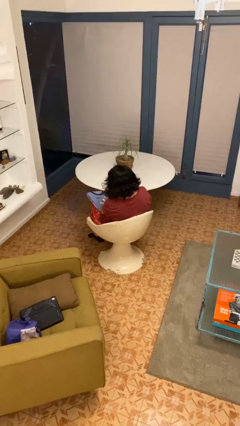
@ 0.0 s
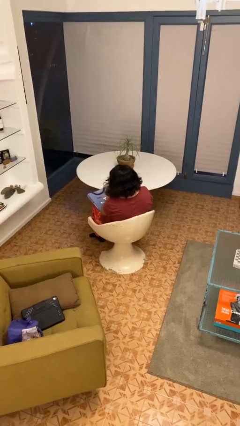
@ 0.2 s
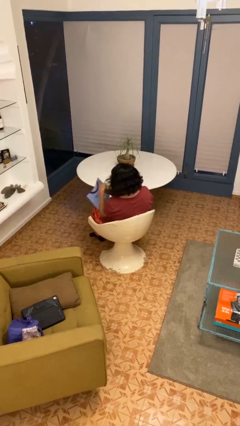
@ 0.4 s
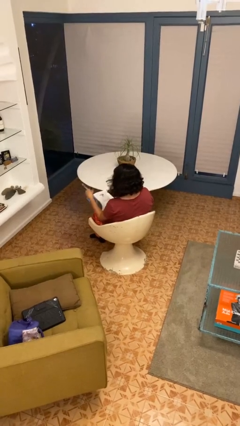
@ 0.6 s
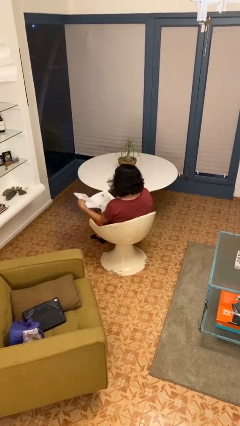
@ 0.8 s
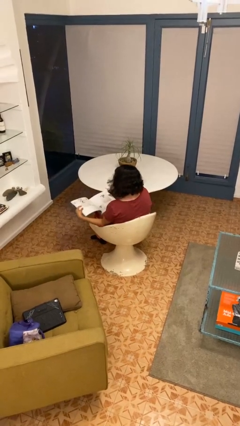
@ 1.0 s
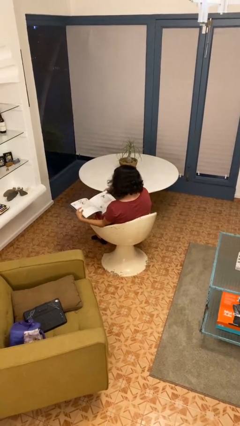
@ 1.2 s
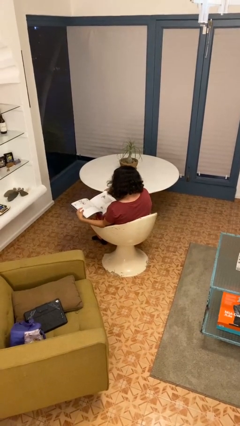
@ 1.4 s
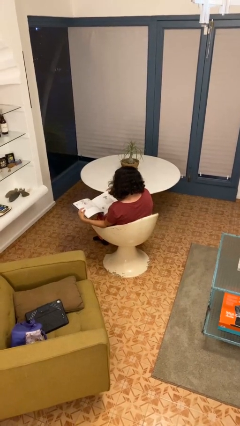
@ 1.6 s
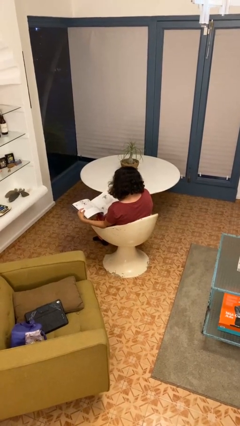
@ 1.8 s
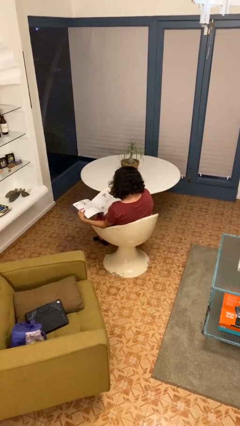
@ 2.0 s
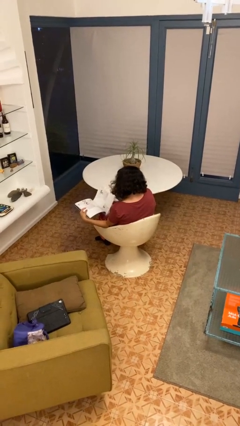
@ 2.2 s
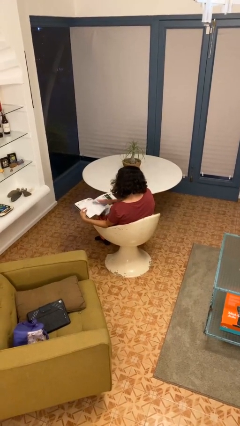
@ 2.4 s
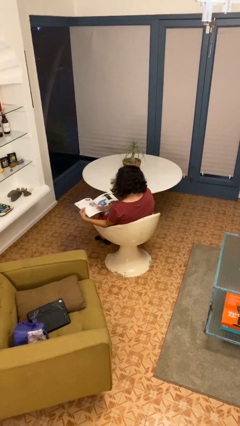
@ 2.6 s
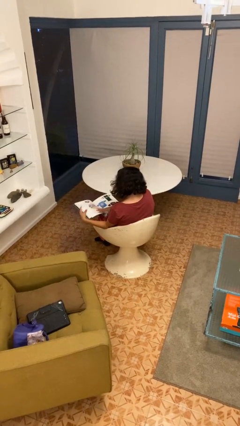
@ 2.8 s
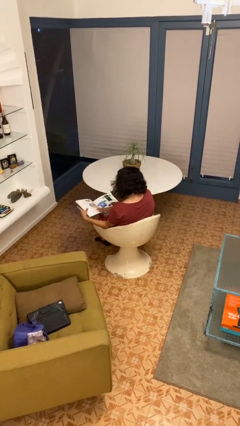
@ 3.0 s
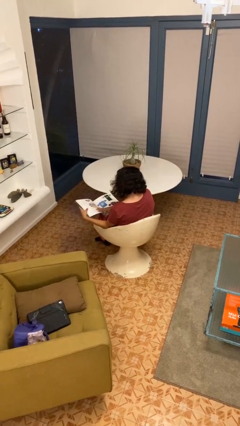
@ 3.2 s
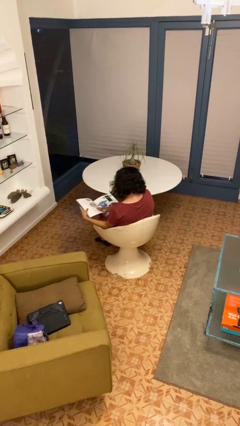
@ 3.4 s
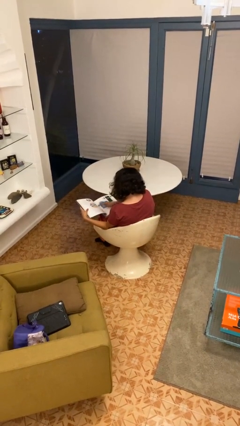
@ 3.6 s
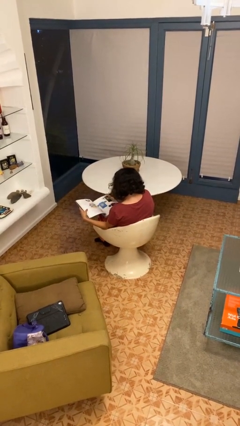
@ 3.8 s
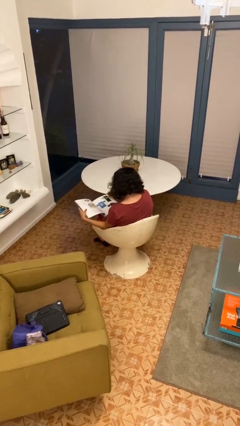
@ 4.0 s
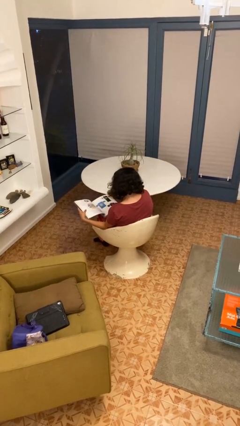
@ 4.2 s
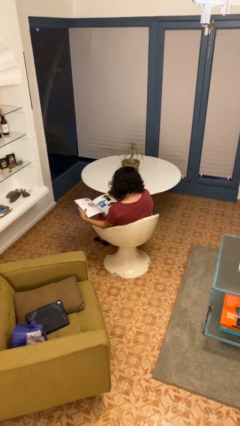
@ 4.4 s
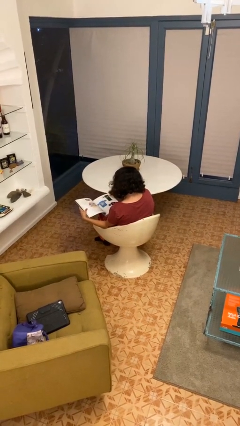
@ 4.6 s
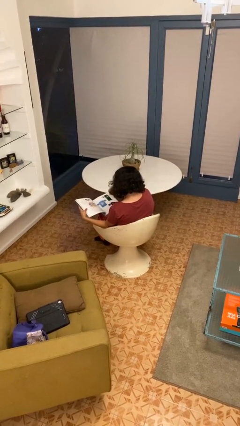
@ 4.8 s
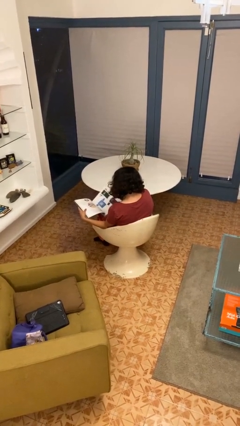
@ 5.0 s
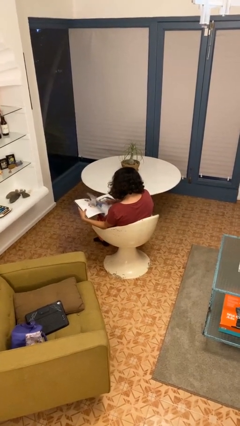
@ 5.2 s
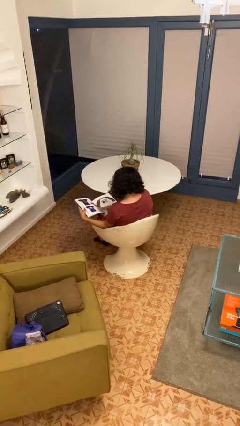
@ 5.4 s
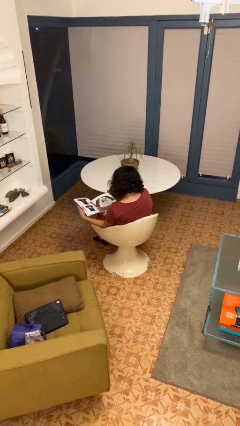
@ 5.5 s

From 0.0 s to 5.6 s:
person reads book

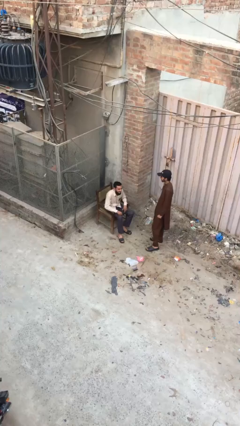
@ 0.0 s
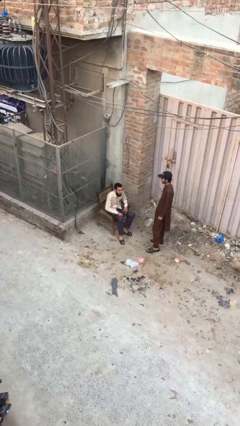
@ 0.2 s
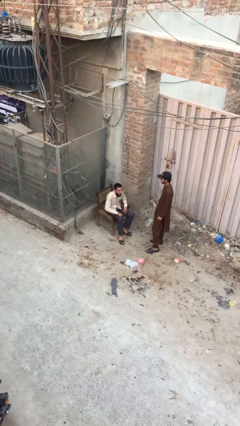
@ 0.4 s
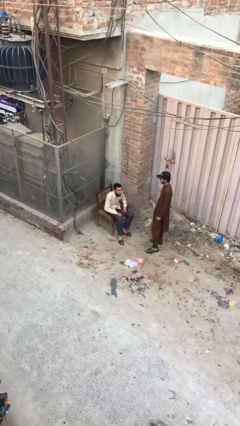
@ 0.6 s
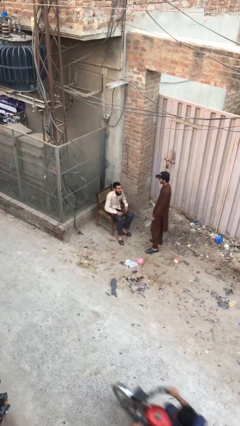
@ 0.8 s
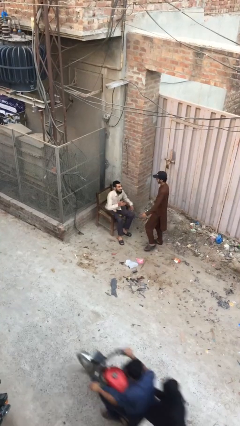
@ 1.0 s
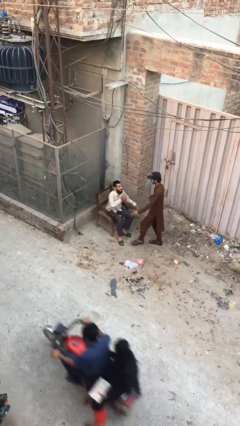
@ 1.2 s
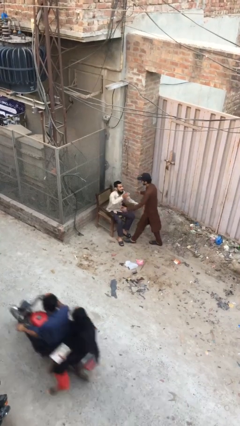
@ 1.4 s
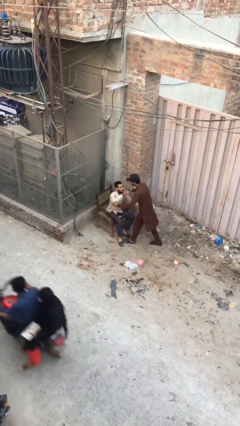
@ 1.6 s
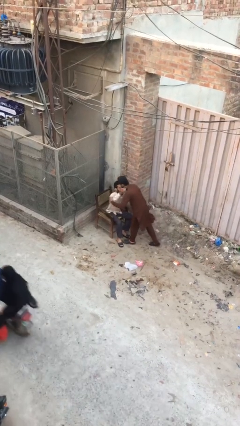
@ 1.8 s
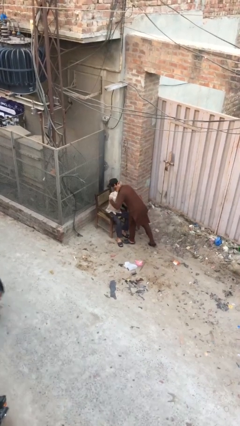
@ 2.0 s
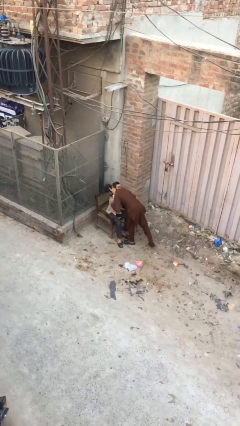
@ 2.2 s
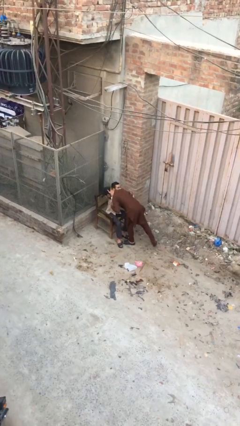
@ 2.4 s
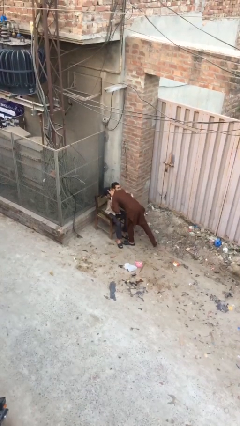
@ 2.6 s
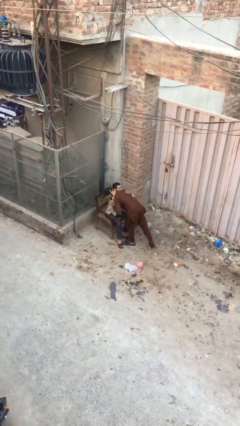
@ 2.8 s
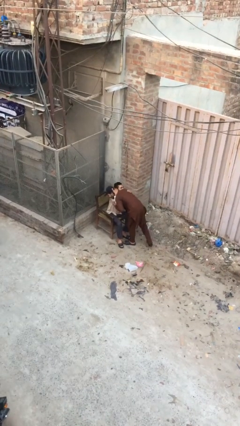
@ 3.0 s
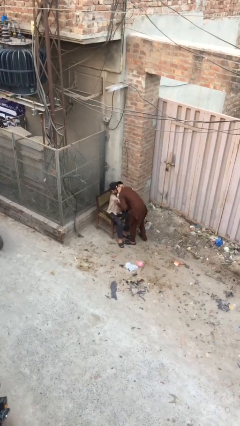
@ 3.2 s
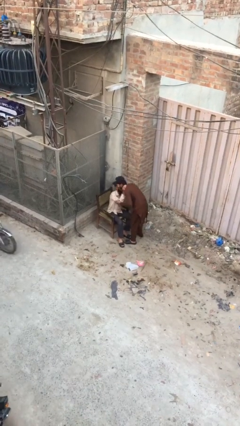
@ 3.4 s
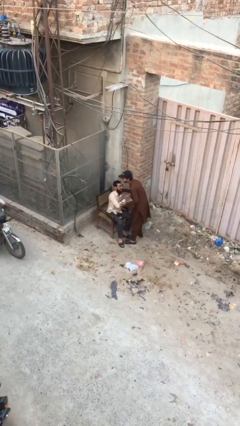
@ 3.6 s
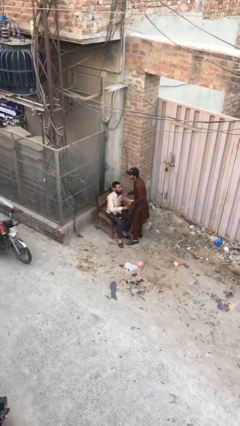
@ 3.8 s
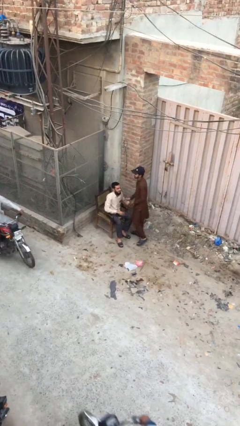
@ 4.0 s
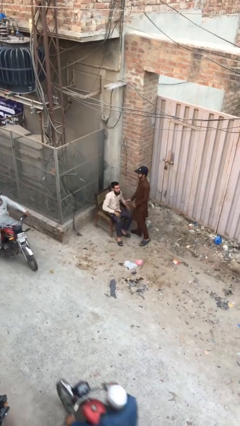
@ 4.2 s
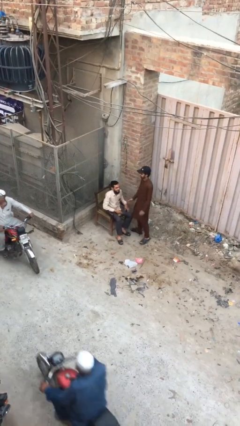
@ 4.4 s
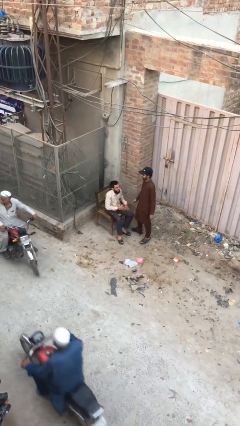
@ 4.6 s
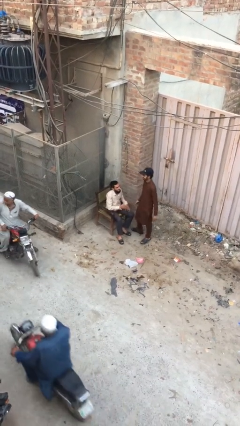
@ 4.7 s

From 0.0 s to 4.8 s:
person embraces person

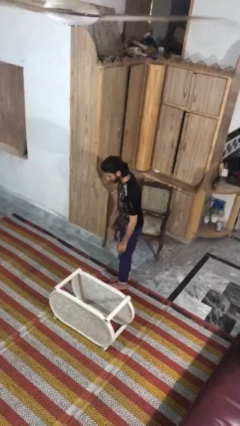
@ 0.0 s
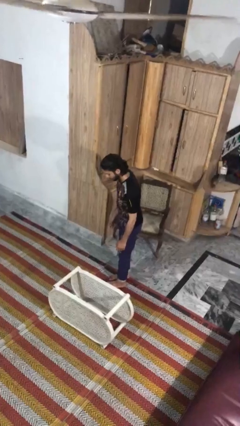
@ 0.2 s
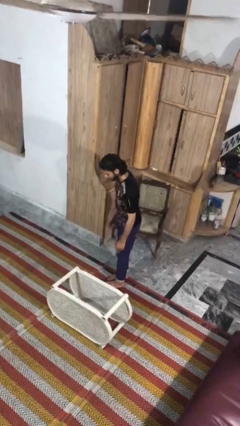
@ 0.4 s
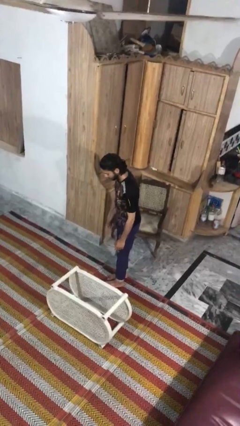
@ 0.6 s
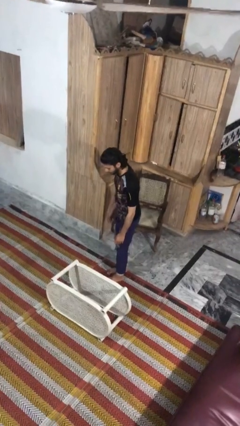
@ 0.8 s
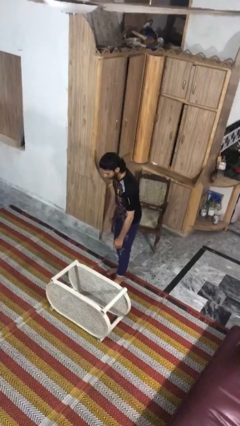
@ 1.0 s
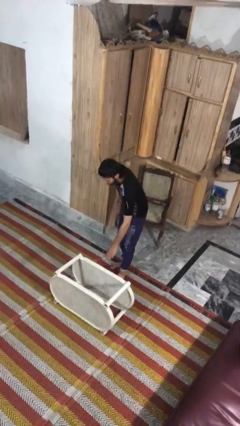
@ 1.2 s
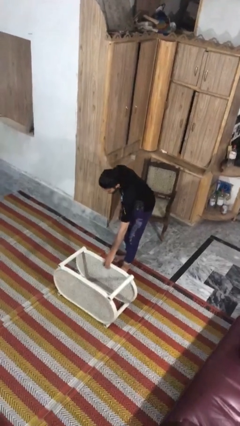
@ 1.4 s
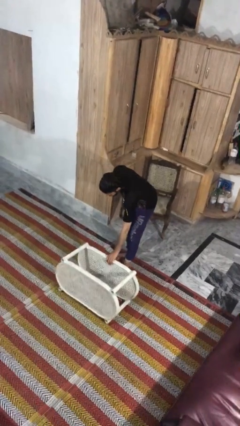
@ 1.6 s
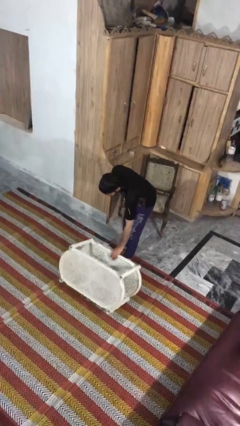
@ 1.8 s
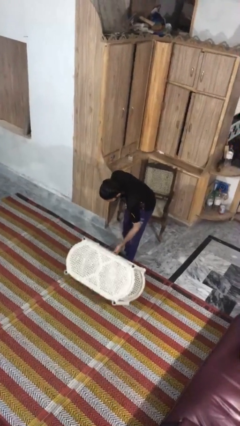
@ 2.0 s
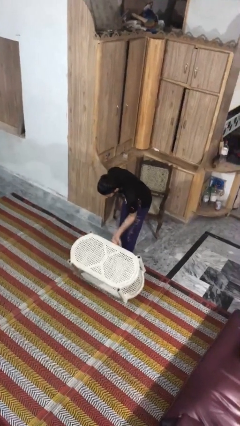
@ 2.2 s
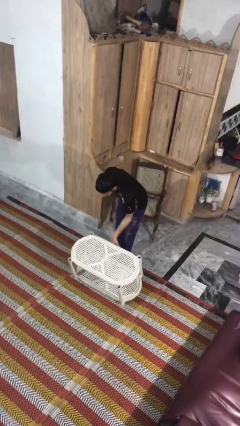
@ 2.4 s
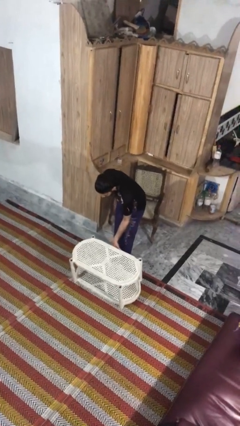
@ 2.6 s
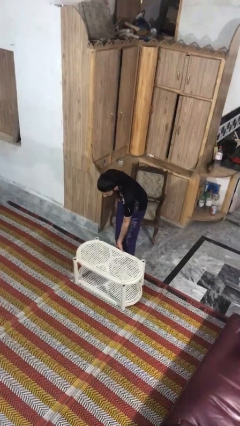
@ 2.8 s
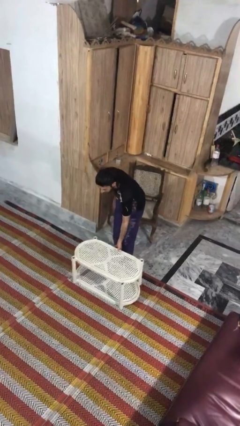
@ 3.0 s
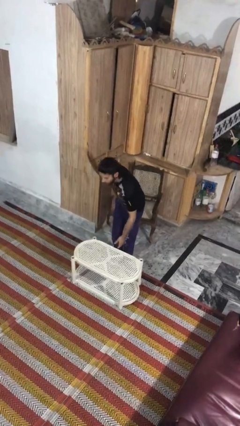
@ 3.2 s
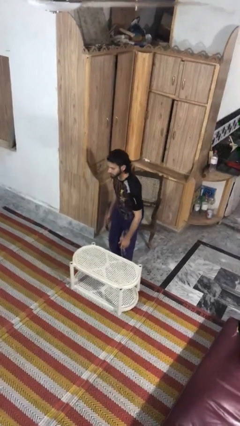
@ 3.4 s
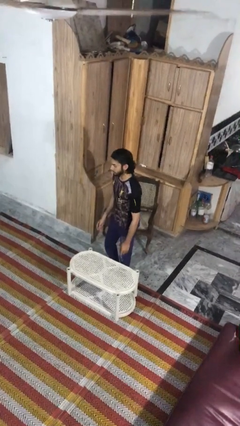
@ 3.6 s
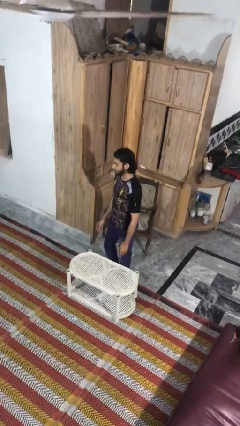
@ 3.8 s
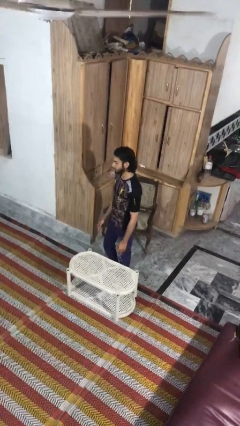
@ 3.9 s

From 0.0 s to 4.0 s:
person sets upright furniture

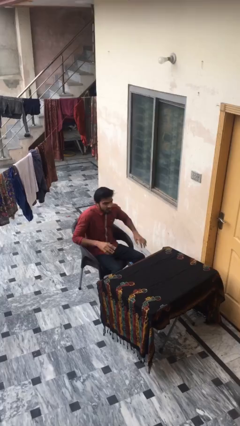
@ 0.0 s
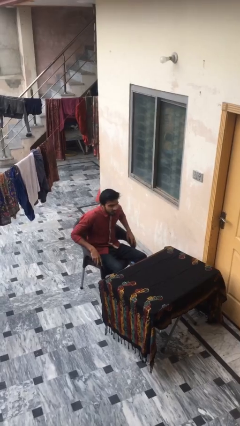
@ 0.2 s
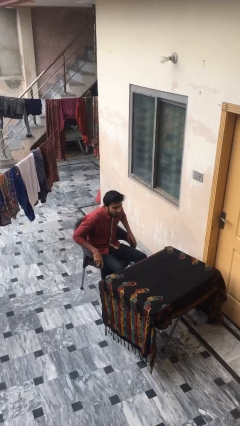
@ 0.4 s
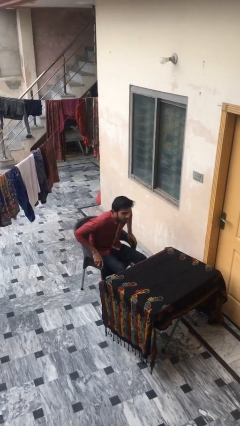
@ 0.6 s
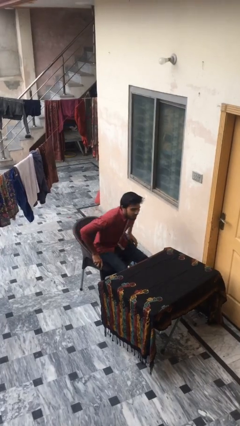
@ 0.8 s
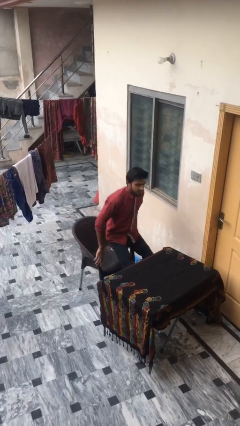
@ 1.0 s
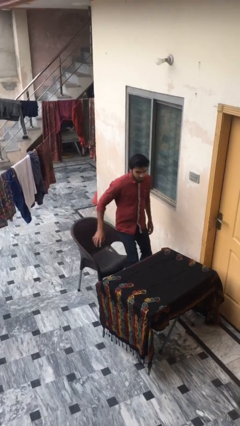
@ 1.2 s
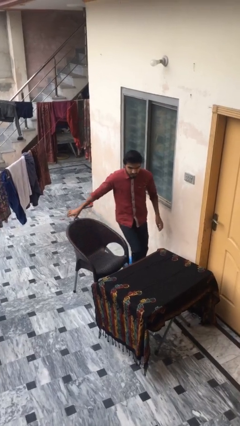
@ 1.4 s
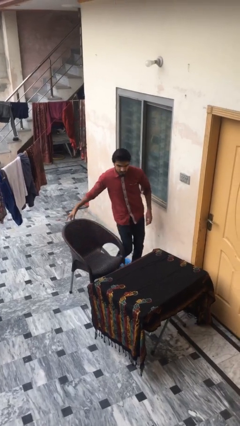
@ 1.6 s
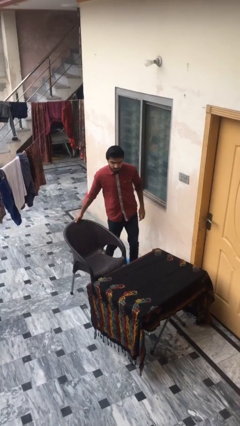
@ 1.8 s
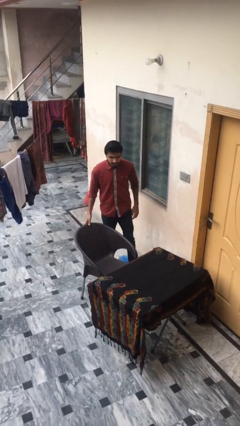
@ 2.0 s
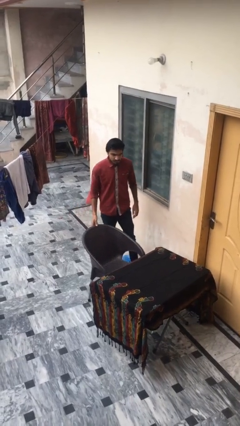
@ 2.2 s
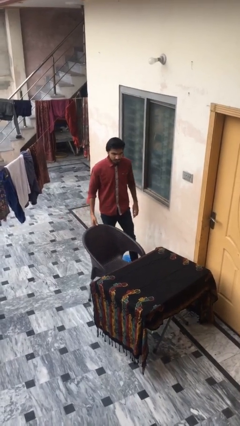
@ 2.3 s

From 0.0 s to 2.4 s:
person stands up

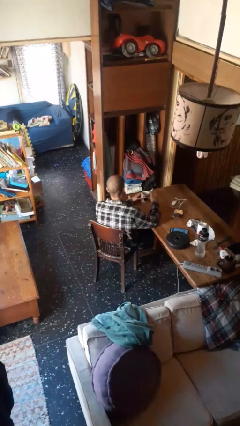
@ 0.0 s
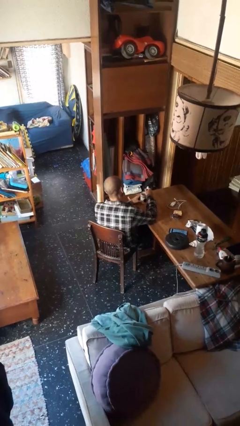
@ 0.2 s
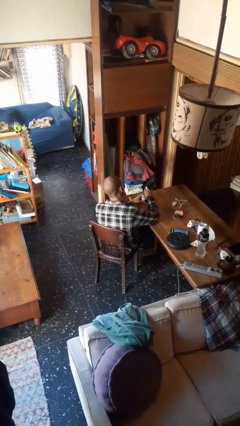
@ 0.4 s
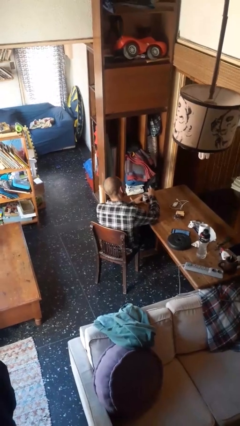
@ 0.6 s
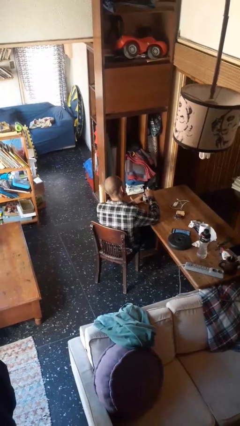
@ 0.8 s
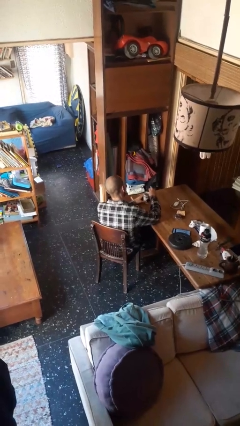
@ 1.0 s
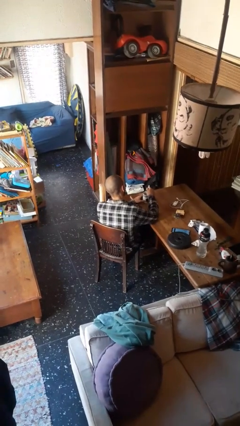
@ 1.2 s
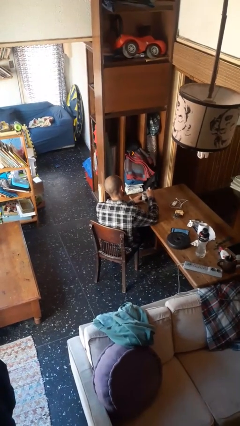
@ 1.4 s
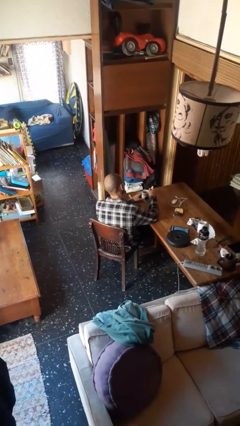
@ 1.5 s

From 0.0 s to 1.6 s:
person stirs mug
